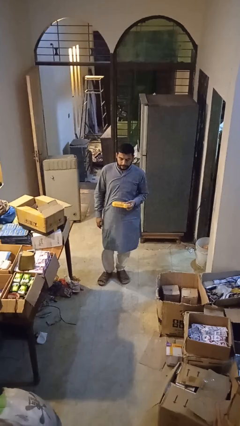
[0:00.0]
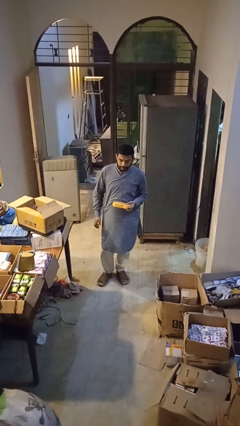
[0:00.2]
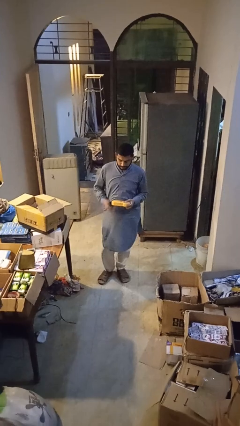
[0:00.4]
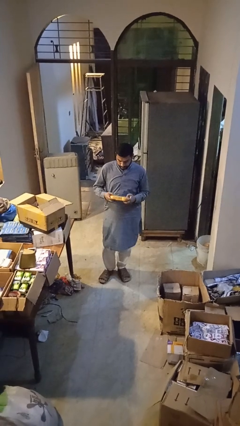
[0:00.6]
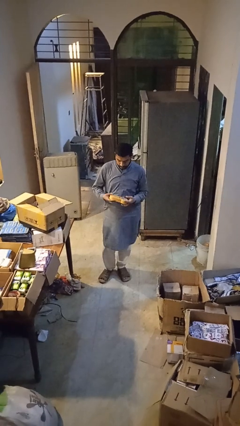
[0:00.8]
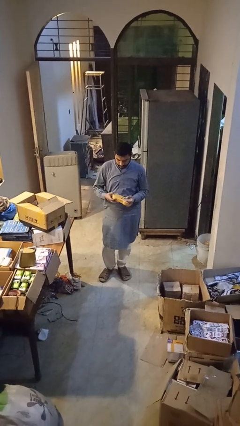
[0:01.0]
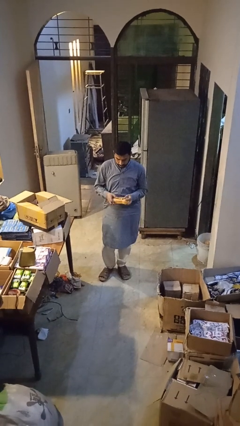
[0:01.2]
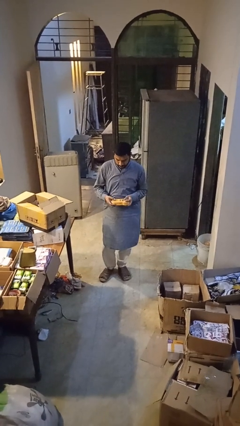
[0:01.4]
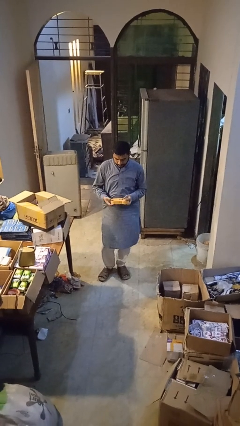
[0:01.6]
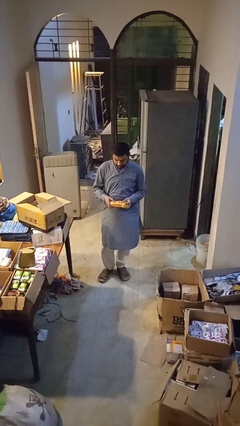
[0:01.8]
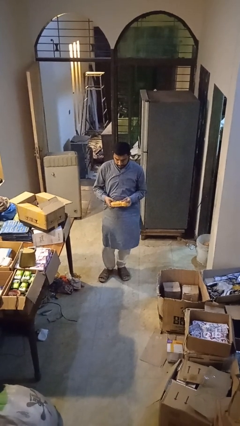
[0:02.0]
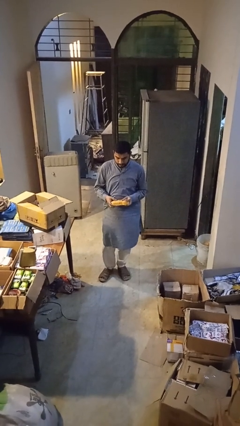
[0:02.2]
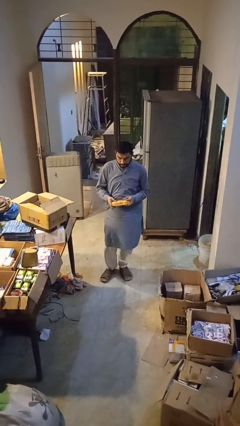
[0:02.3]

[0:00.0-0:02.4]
person interacts with handheld game

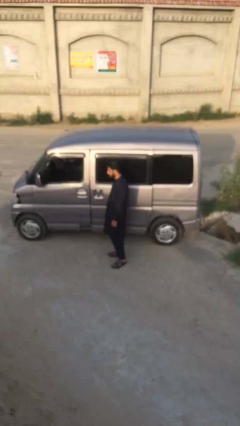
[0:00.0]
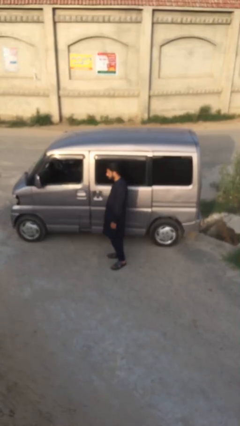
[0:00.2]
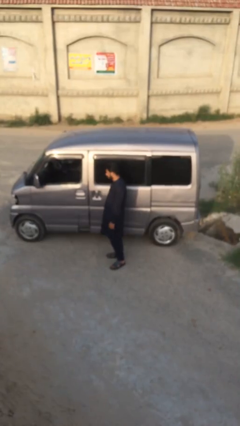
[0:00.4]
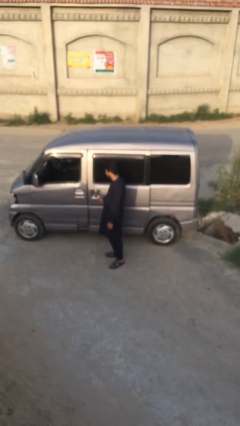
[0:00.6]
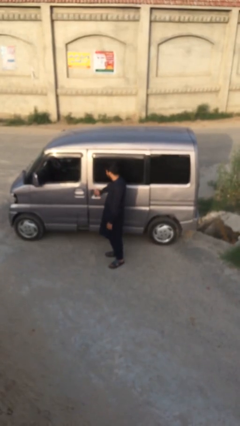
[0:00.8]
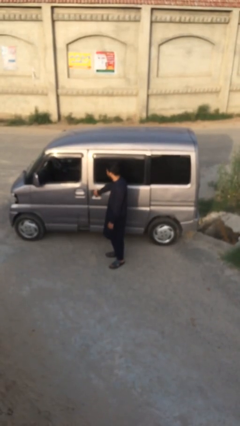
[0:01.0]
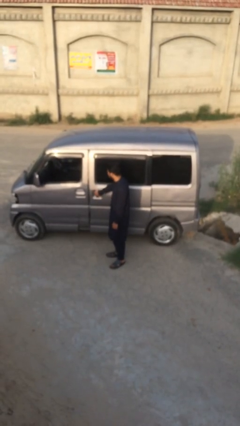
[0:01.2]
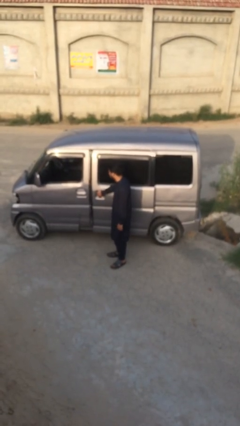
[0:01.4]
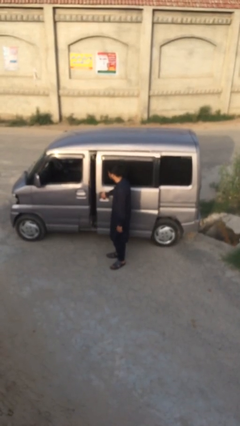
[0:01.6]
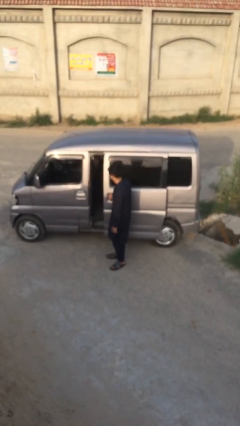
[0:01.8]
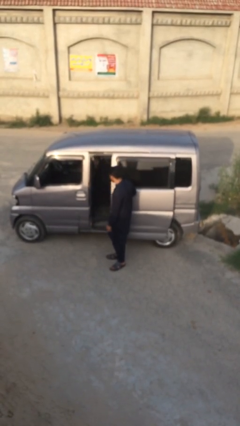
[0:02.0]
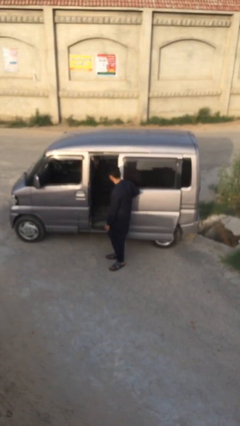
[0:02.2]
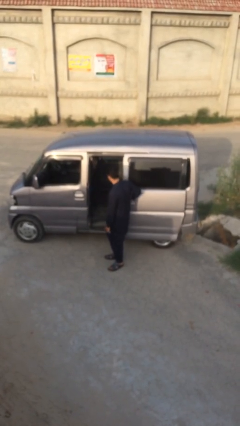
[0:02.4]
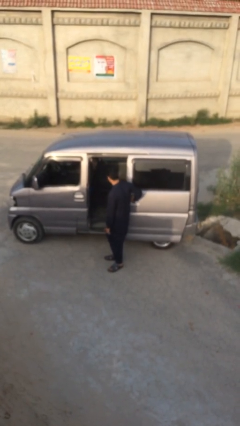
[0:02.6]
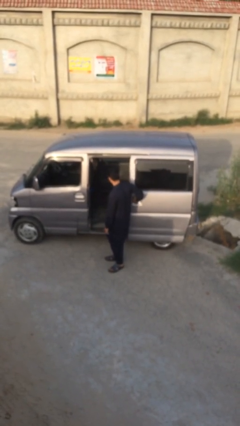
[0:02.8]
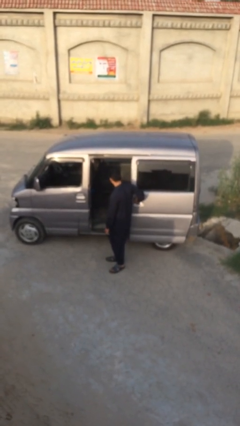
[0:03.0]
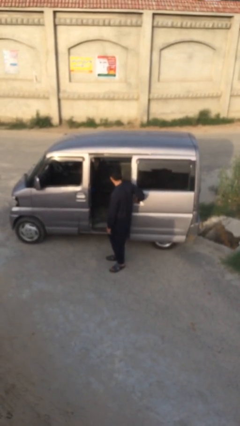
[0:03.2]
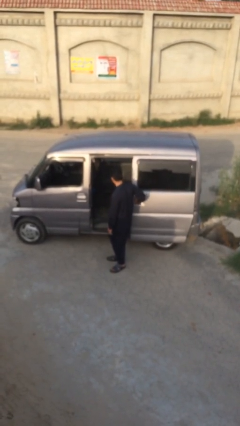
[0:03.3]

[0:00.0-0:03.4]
person opens car door

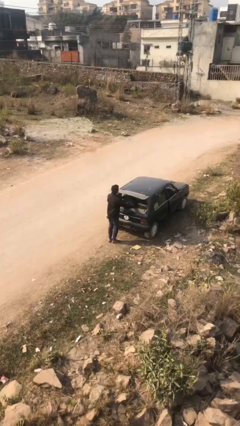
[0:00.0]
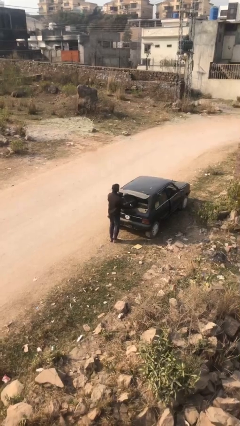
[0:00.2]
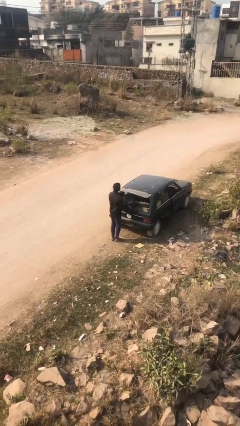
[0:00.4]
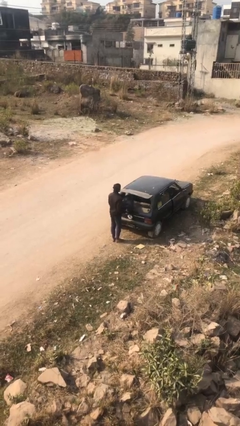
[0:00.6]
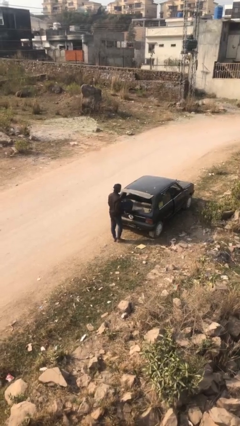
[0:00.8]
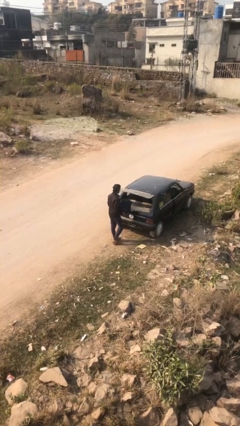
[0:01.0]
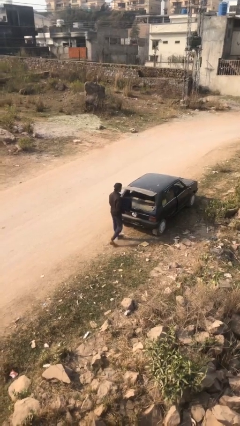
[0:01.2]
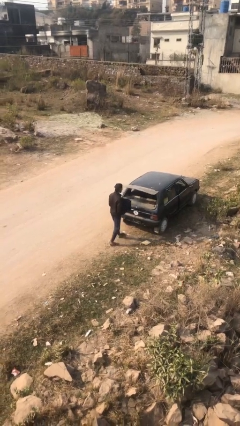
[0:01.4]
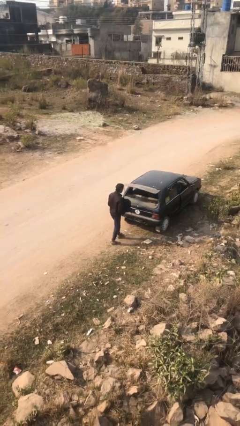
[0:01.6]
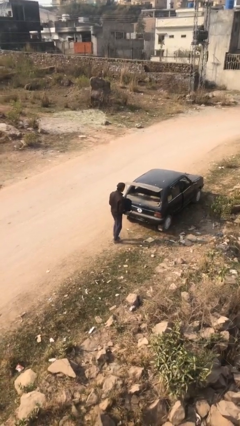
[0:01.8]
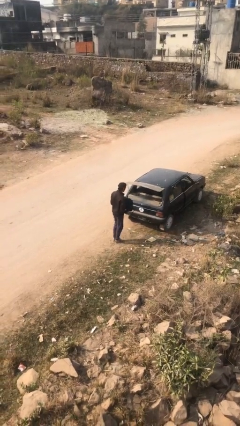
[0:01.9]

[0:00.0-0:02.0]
person unloads car

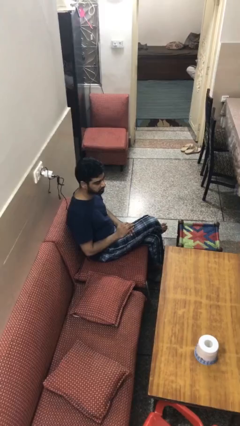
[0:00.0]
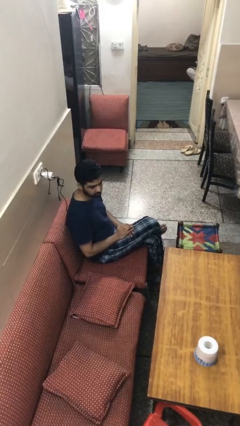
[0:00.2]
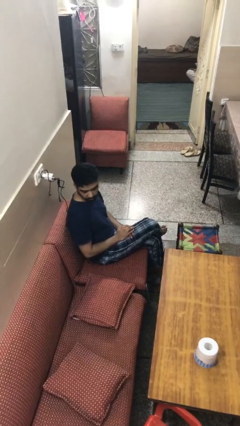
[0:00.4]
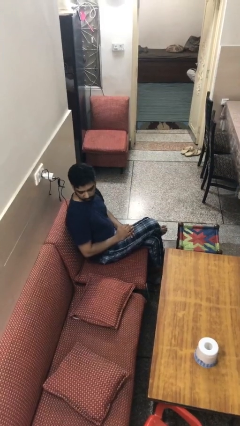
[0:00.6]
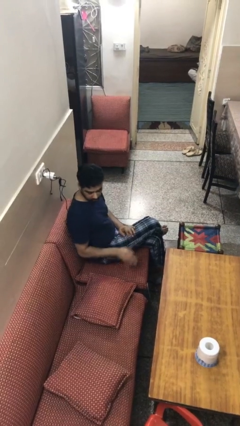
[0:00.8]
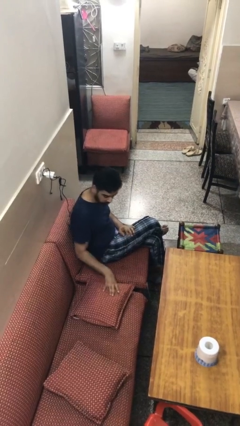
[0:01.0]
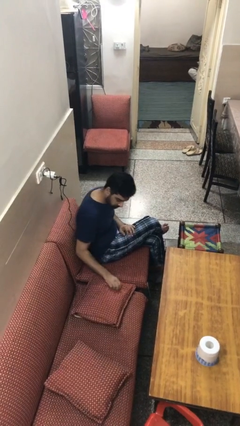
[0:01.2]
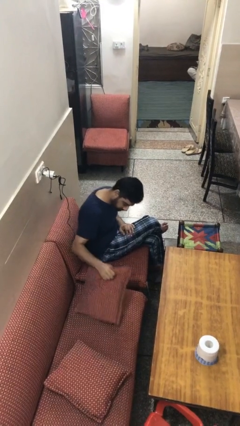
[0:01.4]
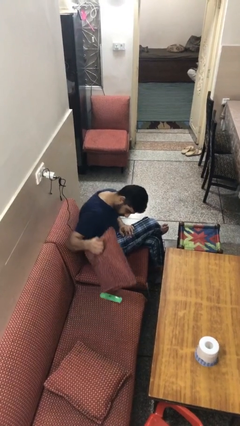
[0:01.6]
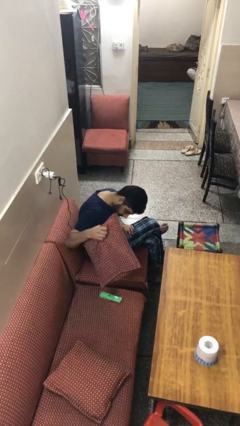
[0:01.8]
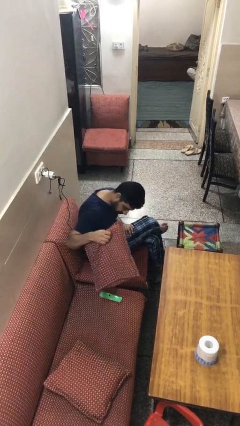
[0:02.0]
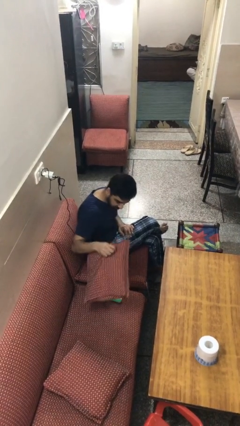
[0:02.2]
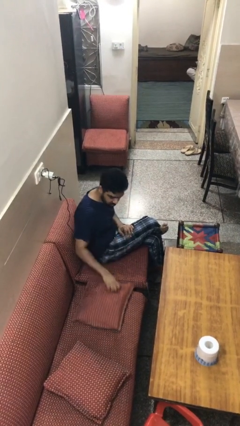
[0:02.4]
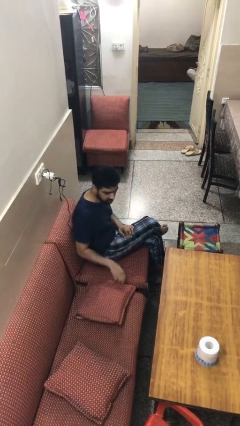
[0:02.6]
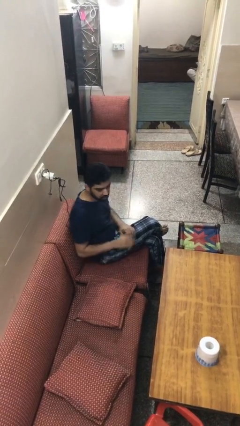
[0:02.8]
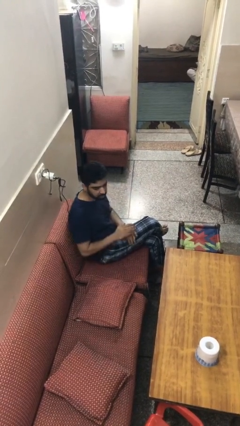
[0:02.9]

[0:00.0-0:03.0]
person searches in couch

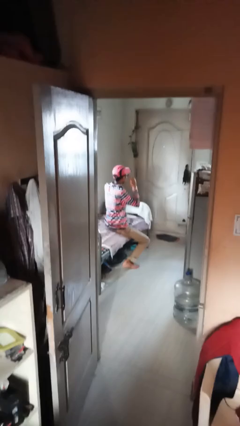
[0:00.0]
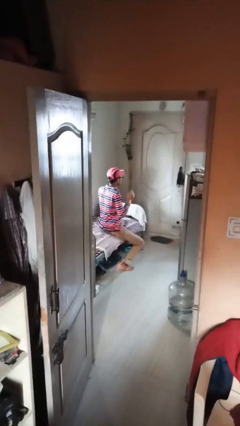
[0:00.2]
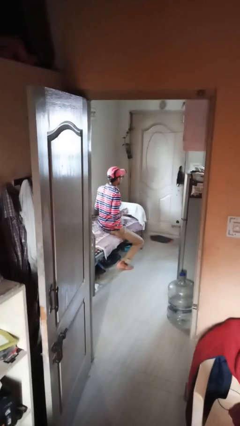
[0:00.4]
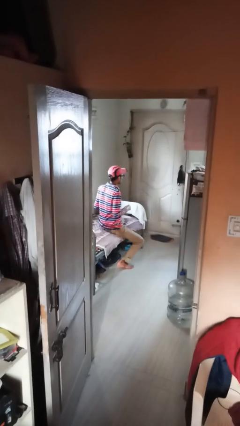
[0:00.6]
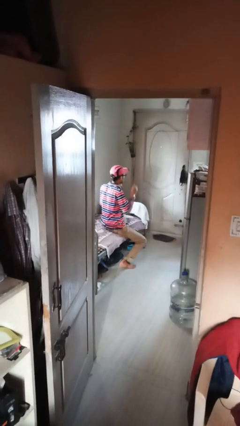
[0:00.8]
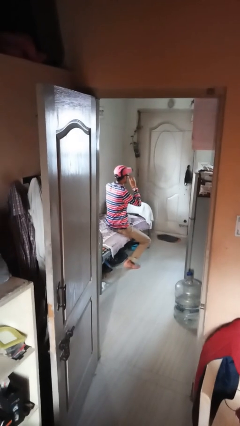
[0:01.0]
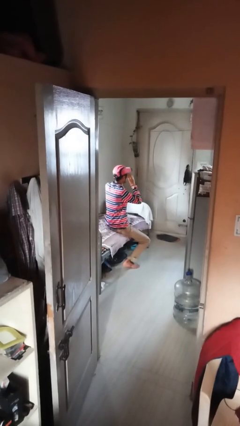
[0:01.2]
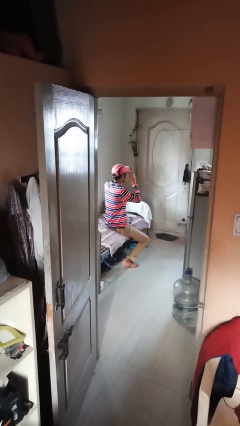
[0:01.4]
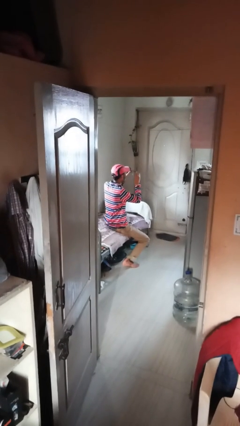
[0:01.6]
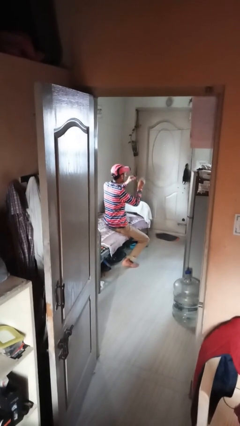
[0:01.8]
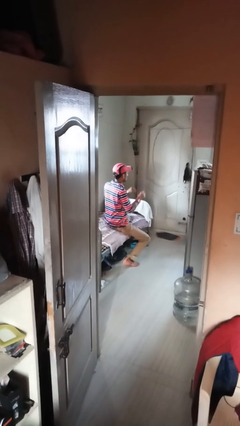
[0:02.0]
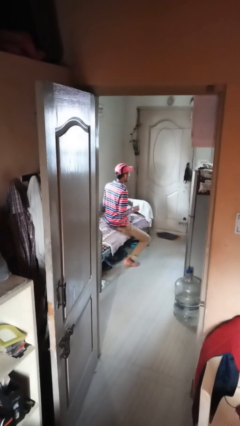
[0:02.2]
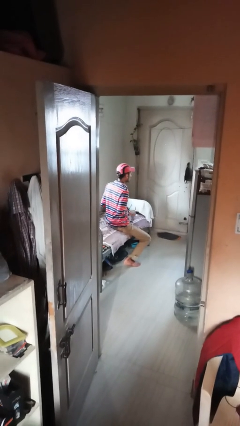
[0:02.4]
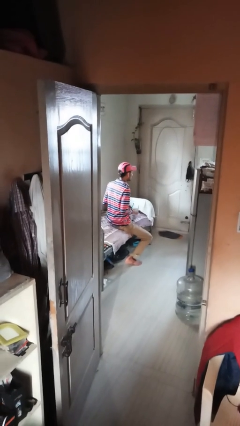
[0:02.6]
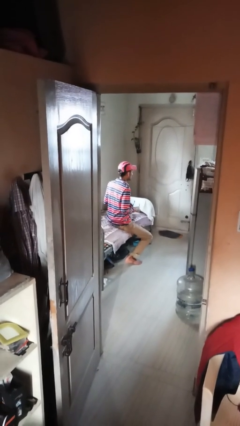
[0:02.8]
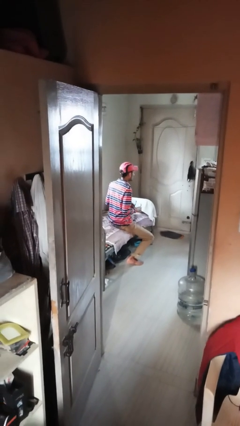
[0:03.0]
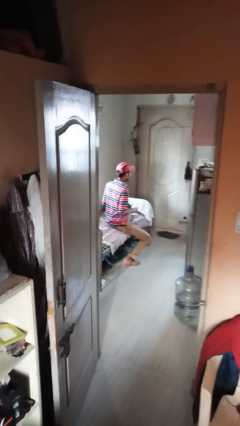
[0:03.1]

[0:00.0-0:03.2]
person takes off glasses

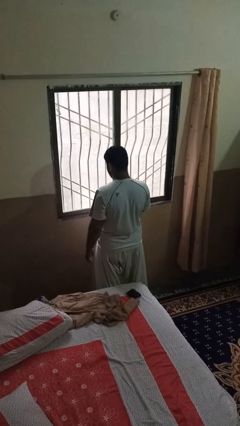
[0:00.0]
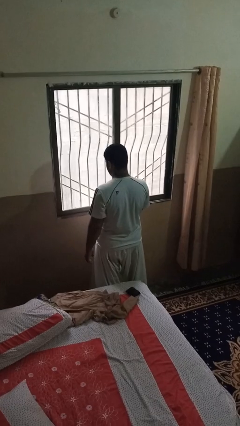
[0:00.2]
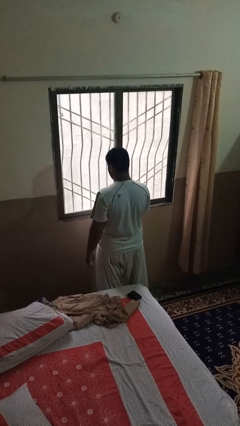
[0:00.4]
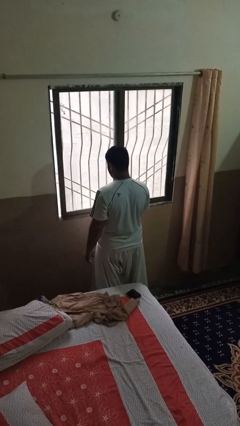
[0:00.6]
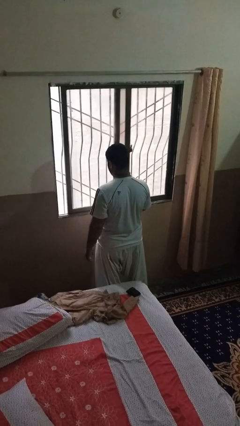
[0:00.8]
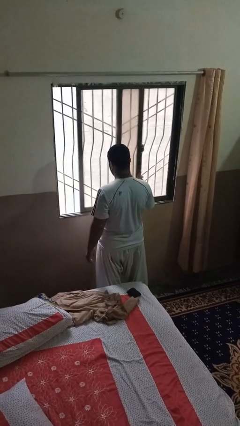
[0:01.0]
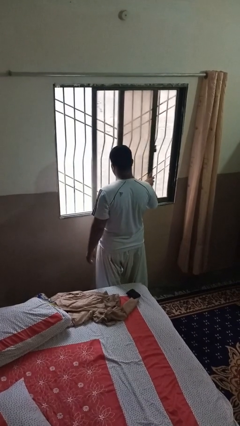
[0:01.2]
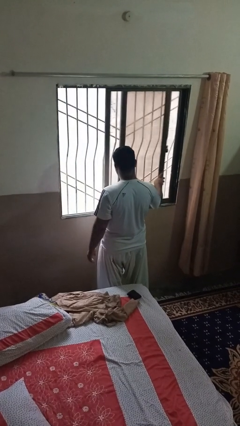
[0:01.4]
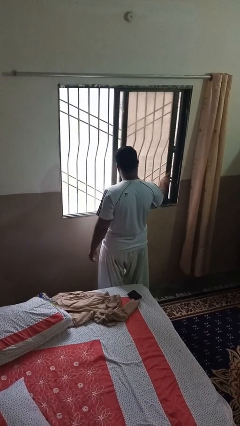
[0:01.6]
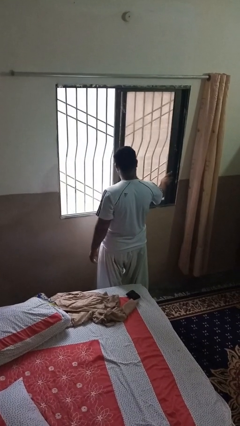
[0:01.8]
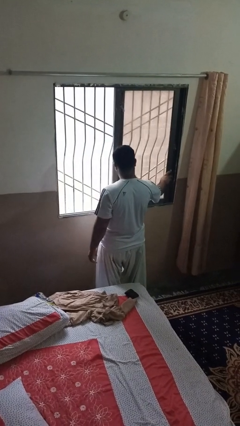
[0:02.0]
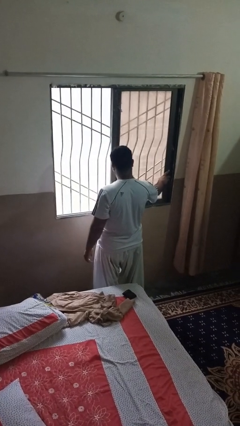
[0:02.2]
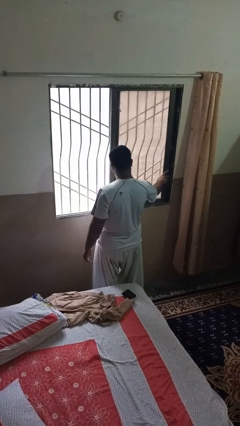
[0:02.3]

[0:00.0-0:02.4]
person opens home window

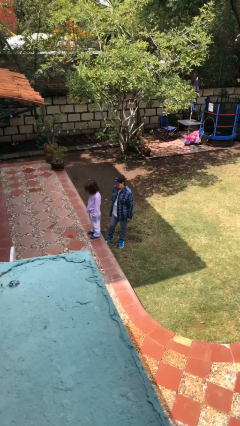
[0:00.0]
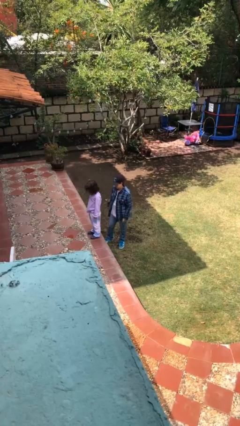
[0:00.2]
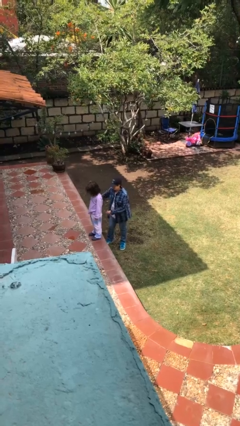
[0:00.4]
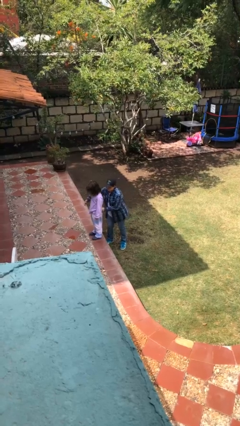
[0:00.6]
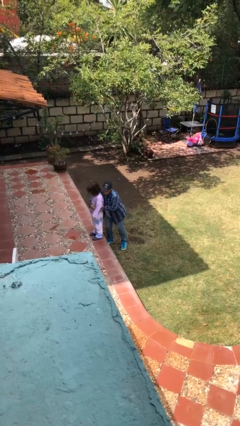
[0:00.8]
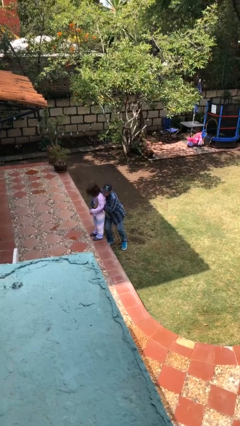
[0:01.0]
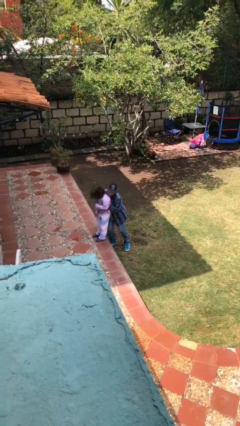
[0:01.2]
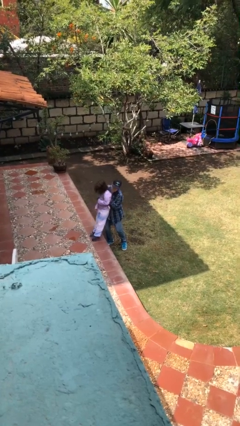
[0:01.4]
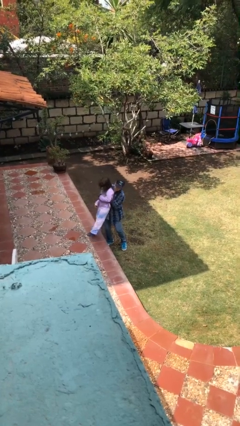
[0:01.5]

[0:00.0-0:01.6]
person picks up person
